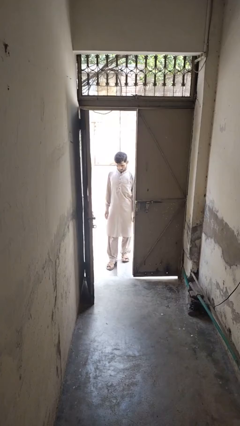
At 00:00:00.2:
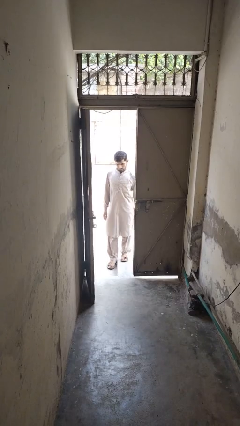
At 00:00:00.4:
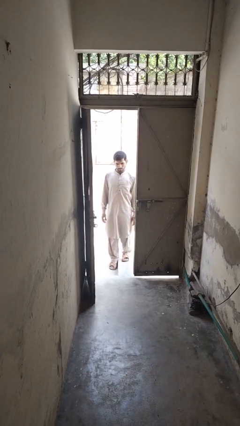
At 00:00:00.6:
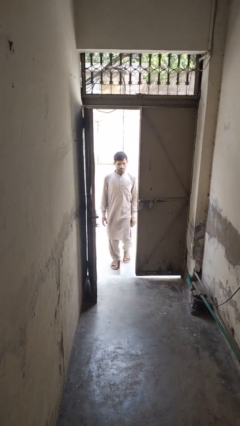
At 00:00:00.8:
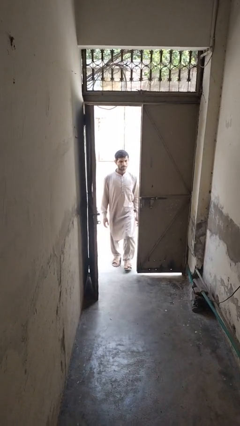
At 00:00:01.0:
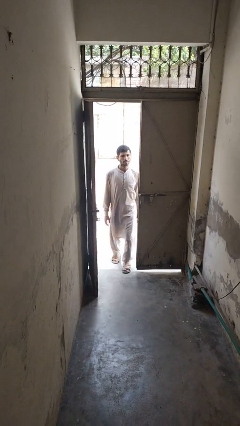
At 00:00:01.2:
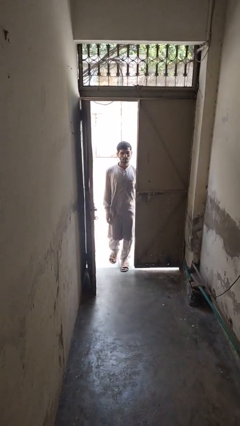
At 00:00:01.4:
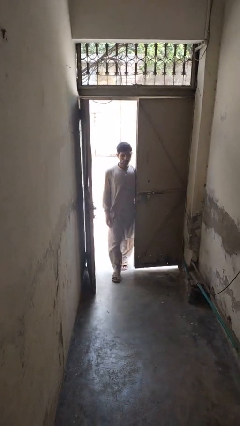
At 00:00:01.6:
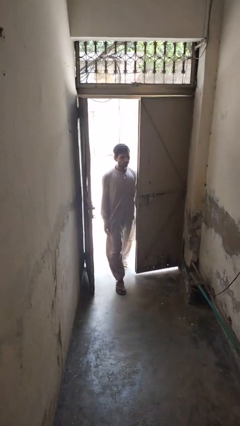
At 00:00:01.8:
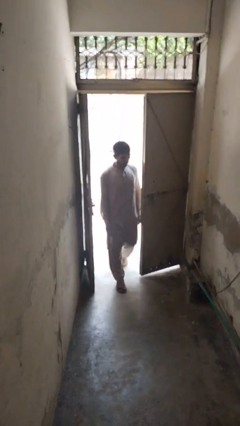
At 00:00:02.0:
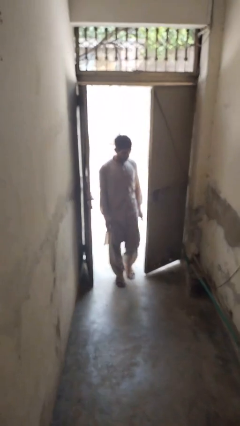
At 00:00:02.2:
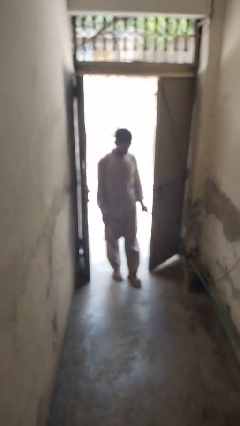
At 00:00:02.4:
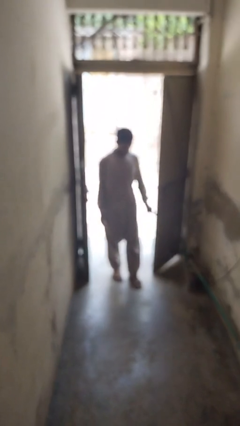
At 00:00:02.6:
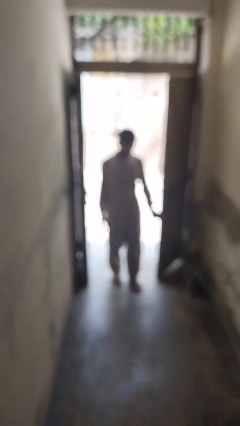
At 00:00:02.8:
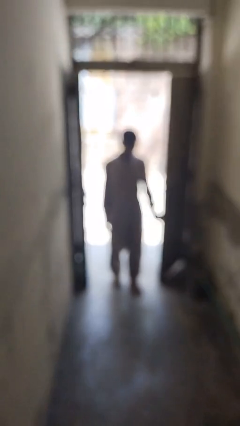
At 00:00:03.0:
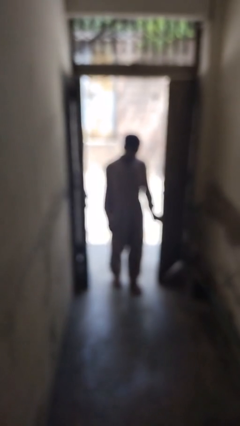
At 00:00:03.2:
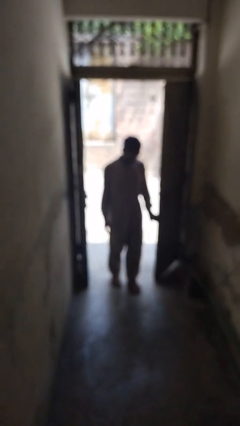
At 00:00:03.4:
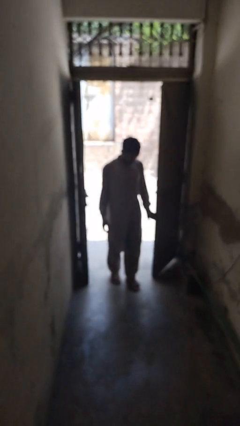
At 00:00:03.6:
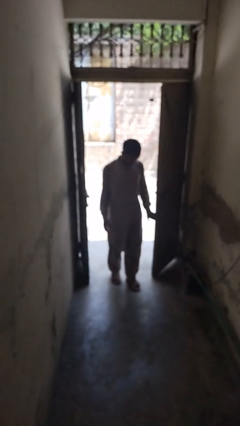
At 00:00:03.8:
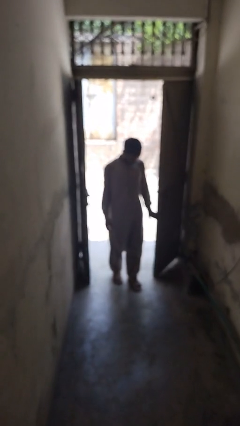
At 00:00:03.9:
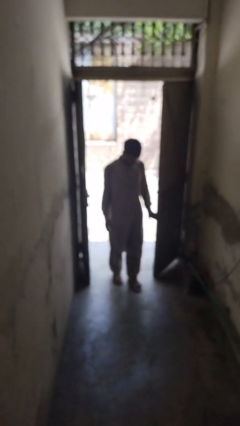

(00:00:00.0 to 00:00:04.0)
person bumps into wall

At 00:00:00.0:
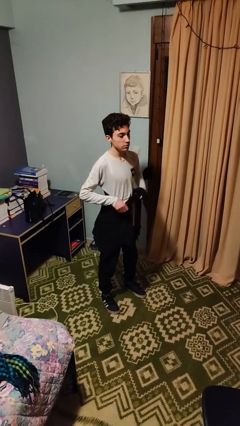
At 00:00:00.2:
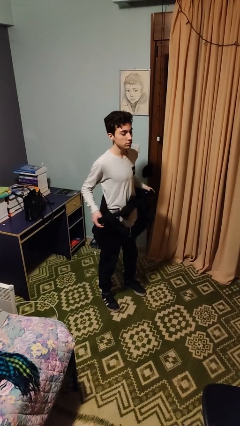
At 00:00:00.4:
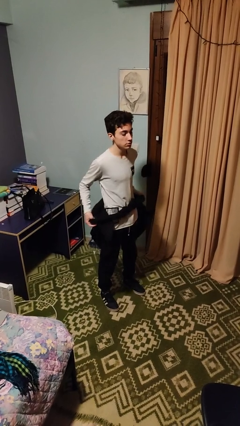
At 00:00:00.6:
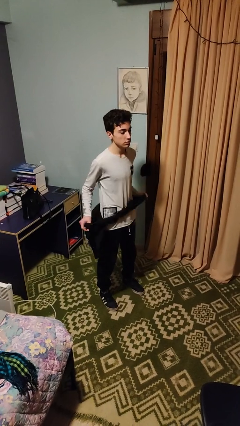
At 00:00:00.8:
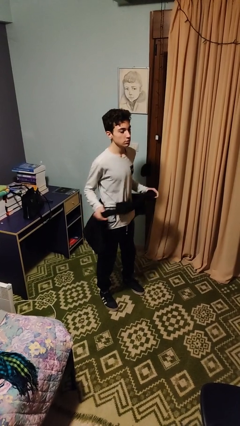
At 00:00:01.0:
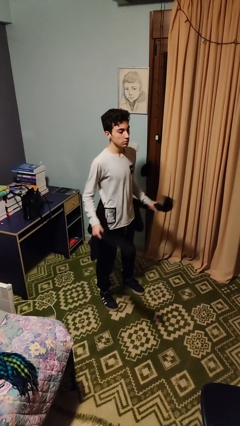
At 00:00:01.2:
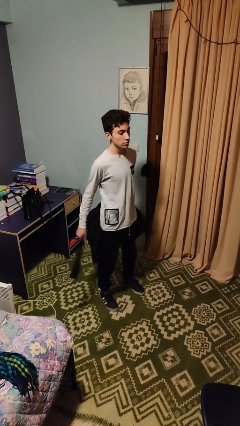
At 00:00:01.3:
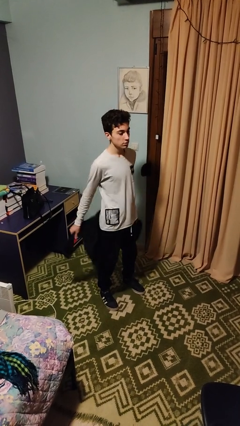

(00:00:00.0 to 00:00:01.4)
person unties jacket around waist

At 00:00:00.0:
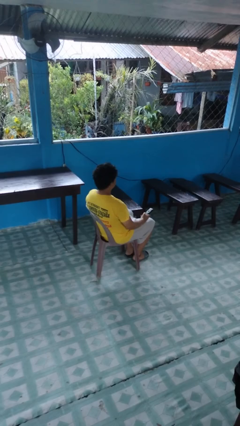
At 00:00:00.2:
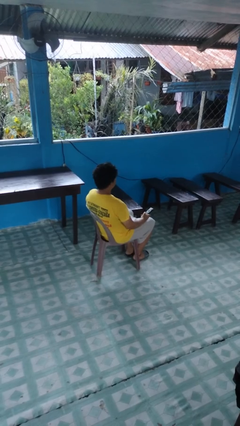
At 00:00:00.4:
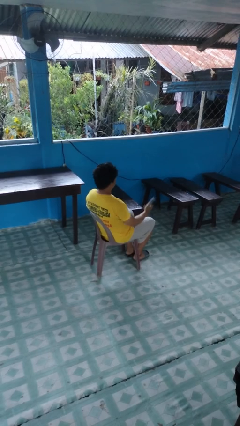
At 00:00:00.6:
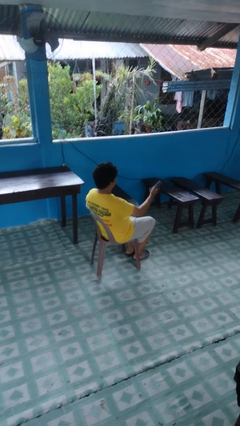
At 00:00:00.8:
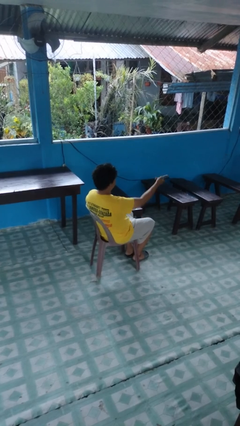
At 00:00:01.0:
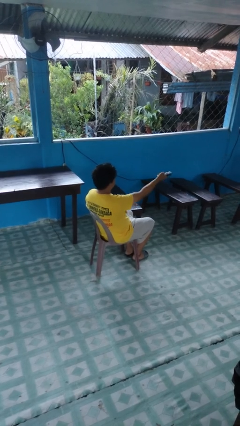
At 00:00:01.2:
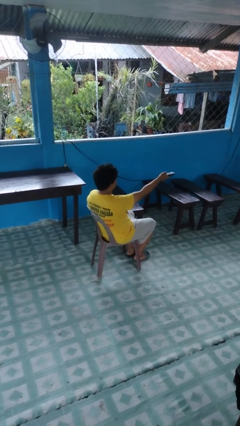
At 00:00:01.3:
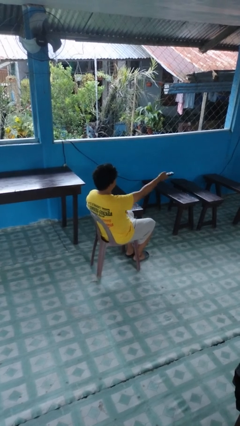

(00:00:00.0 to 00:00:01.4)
person uses television remote

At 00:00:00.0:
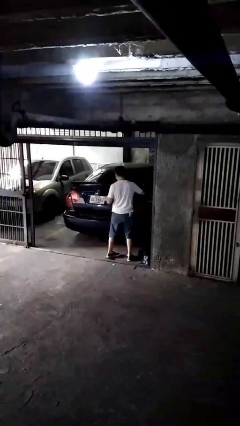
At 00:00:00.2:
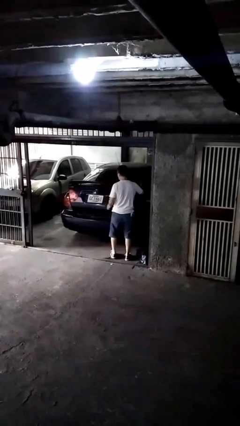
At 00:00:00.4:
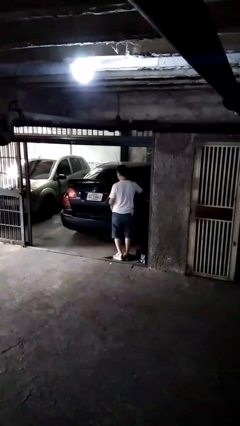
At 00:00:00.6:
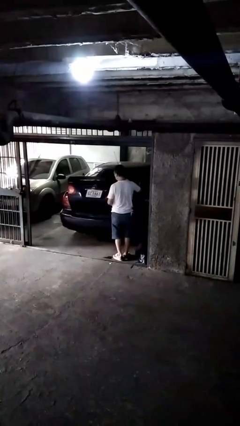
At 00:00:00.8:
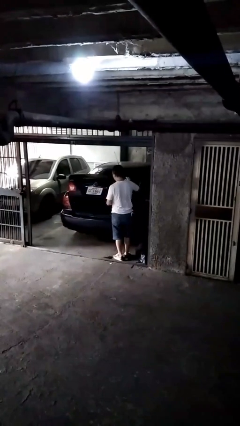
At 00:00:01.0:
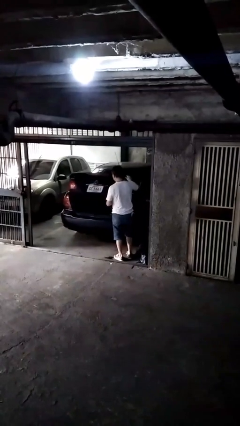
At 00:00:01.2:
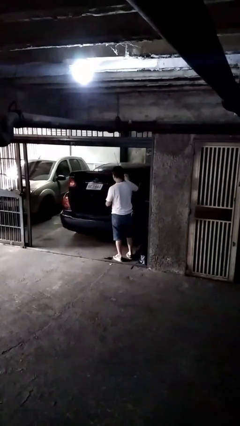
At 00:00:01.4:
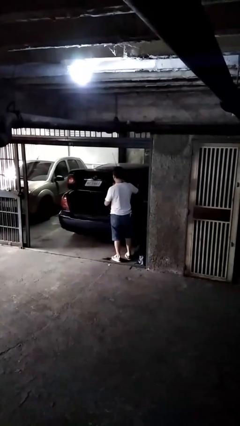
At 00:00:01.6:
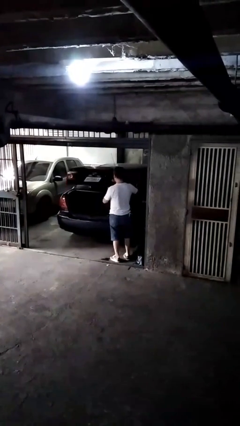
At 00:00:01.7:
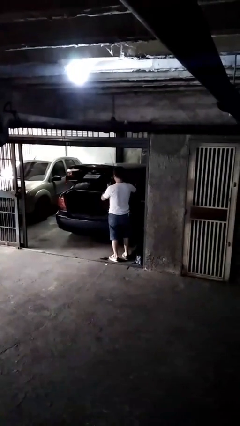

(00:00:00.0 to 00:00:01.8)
person opens car trunk

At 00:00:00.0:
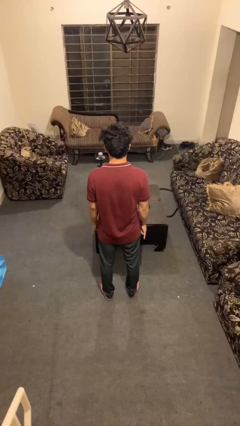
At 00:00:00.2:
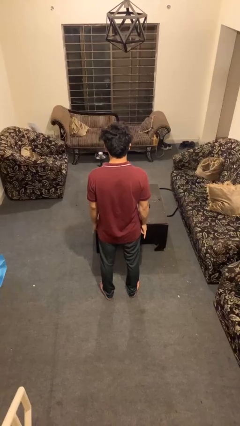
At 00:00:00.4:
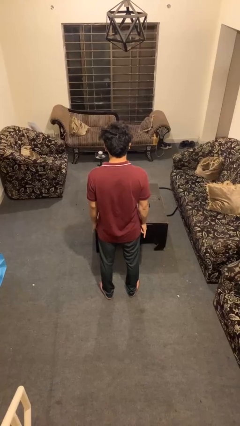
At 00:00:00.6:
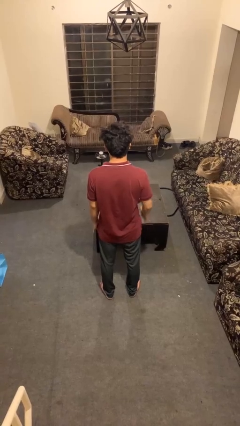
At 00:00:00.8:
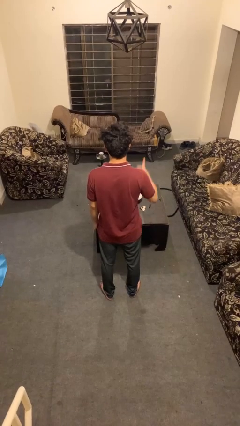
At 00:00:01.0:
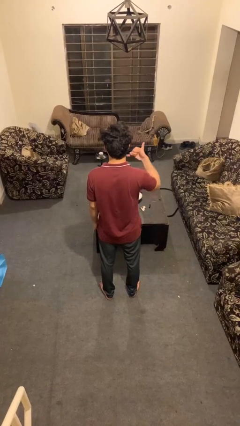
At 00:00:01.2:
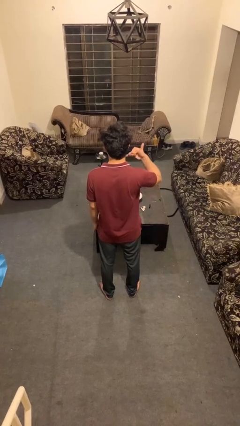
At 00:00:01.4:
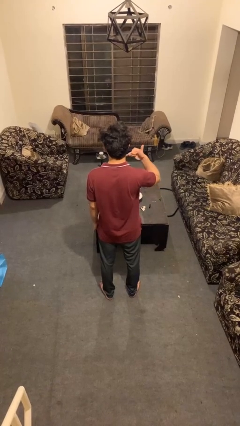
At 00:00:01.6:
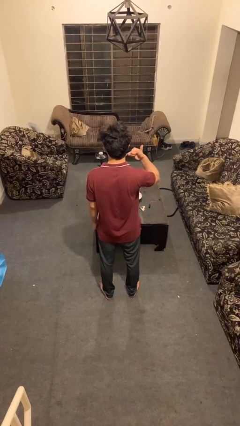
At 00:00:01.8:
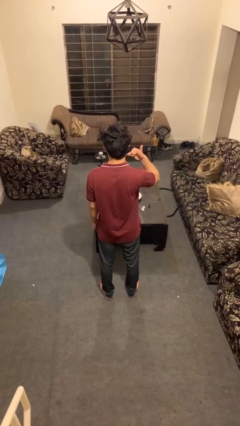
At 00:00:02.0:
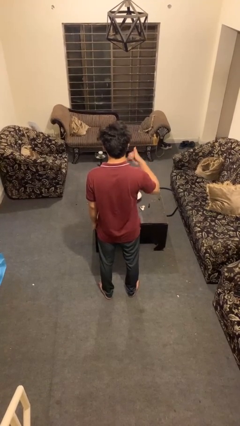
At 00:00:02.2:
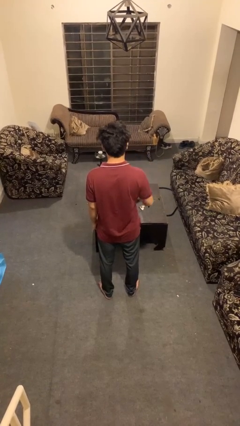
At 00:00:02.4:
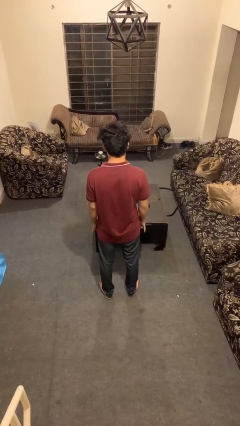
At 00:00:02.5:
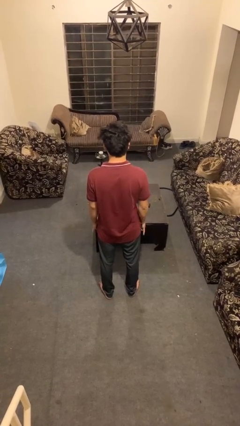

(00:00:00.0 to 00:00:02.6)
person gestures call me

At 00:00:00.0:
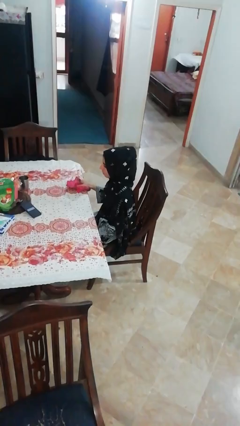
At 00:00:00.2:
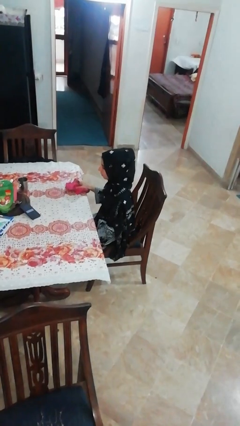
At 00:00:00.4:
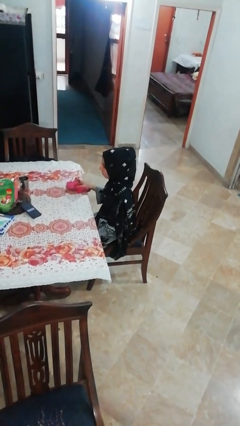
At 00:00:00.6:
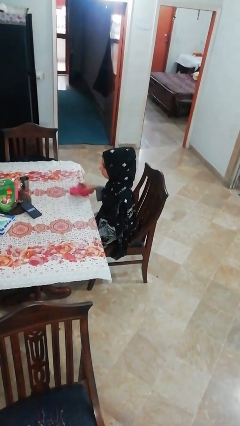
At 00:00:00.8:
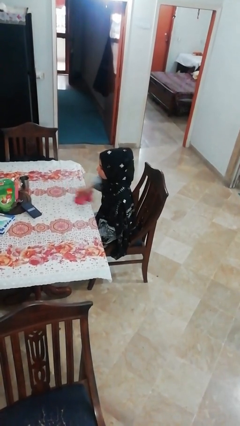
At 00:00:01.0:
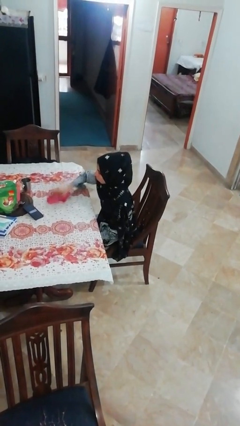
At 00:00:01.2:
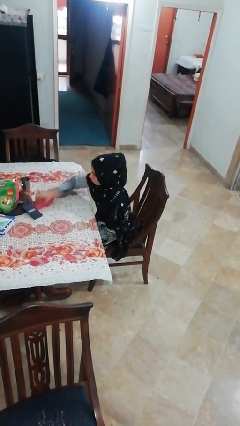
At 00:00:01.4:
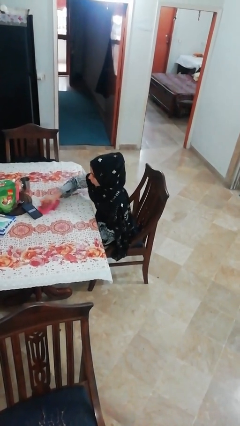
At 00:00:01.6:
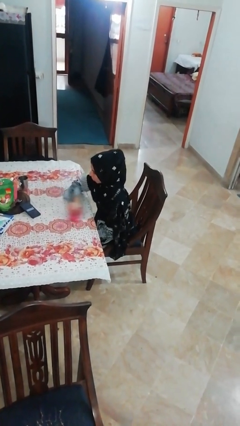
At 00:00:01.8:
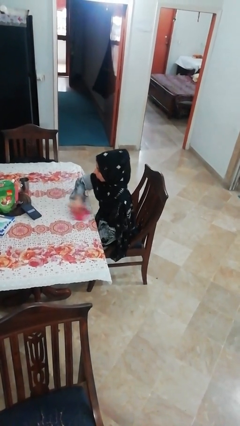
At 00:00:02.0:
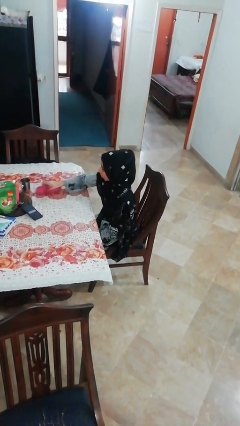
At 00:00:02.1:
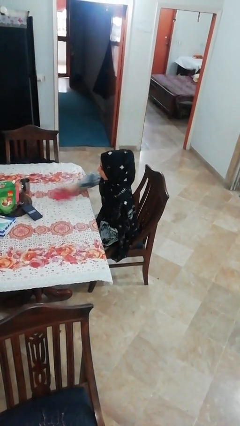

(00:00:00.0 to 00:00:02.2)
person cleans table with rag

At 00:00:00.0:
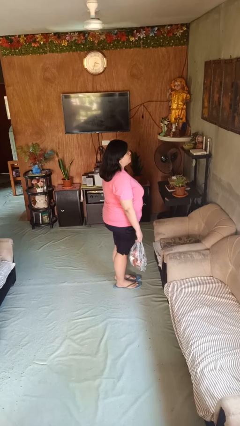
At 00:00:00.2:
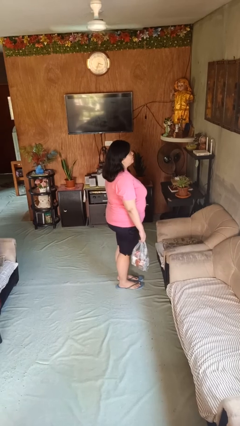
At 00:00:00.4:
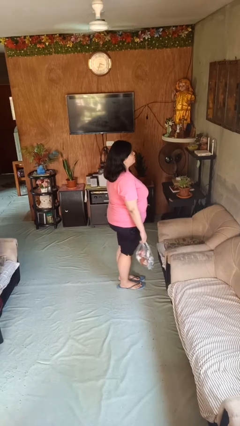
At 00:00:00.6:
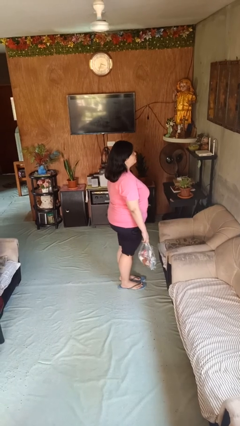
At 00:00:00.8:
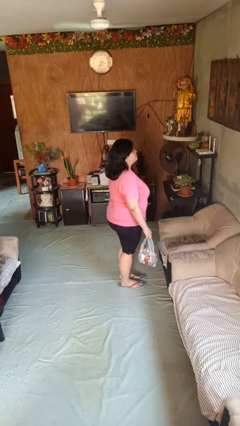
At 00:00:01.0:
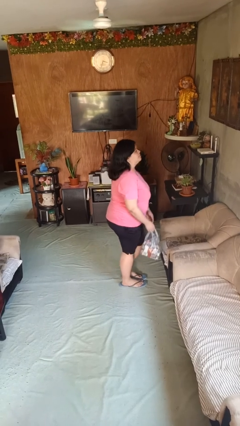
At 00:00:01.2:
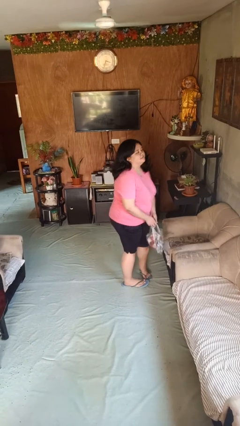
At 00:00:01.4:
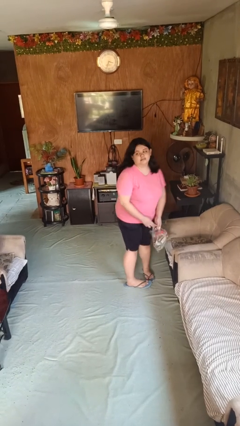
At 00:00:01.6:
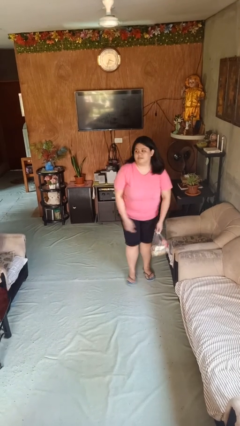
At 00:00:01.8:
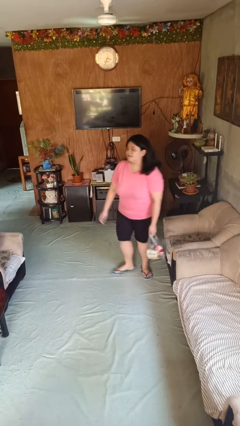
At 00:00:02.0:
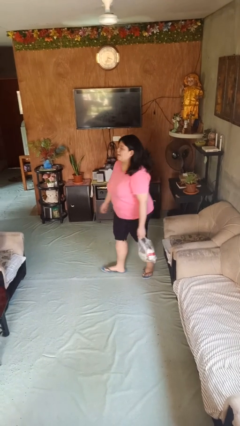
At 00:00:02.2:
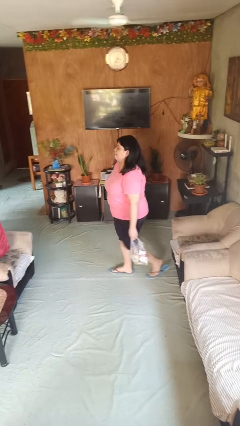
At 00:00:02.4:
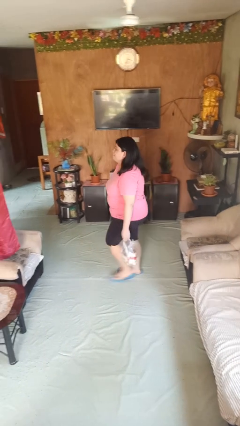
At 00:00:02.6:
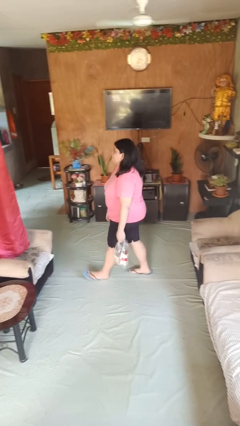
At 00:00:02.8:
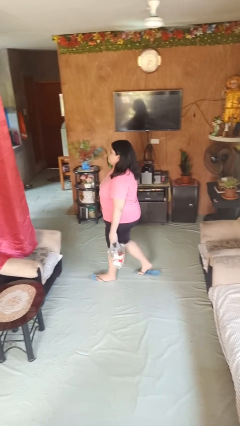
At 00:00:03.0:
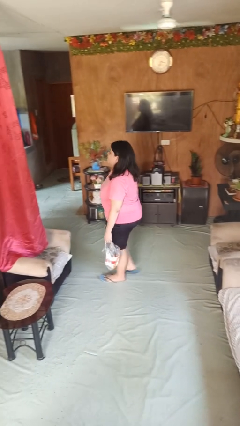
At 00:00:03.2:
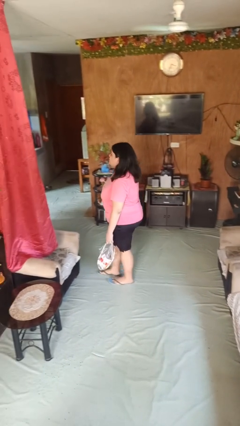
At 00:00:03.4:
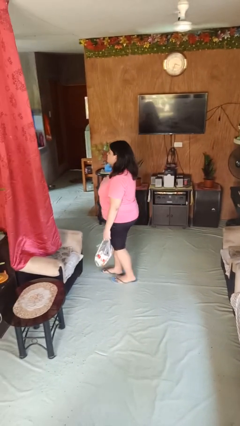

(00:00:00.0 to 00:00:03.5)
person carries groceries

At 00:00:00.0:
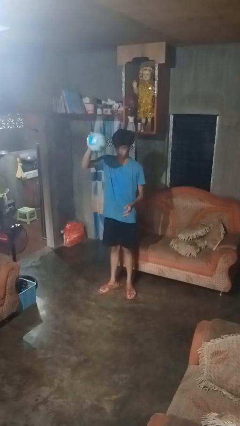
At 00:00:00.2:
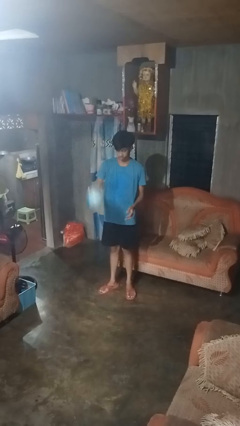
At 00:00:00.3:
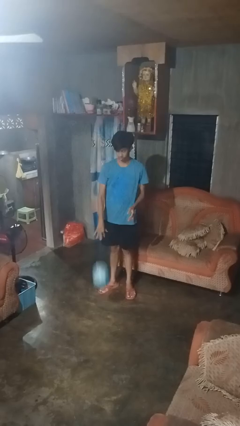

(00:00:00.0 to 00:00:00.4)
person bounces ball on floor
